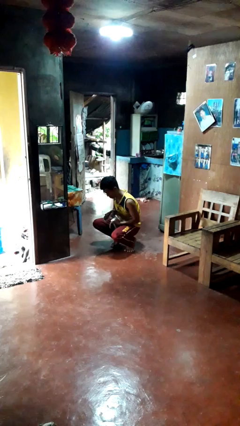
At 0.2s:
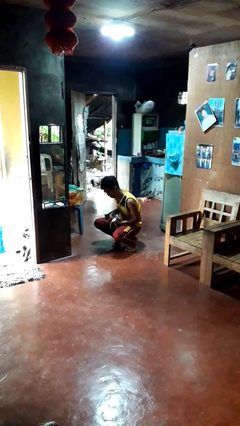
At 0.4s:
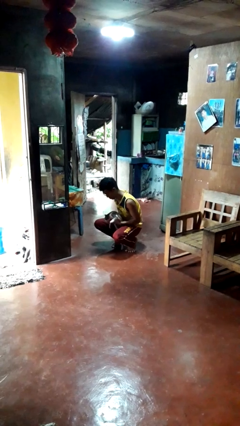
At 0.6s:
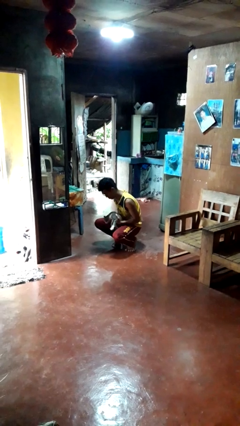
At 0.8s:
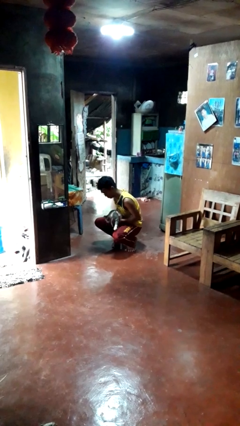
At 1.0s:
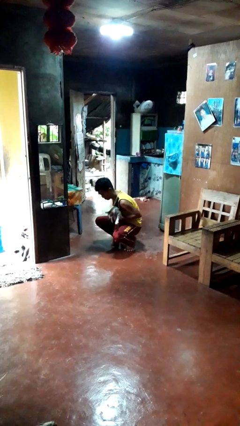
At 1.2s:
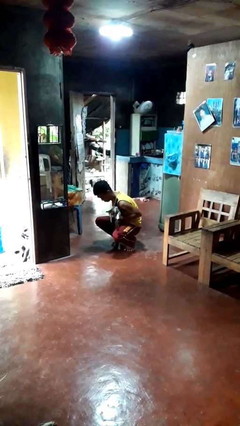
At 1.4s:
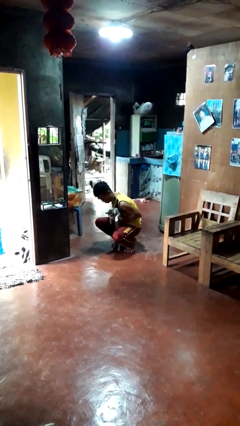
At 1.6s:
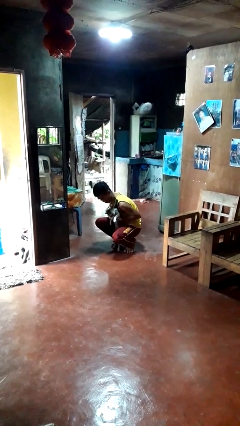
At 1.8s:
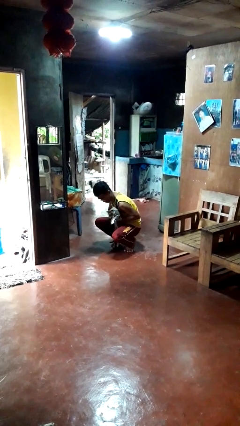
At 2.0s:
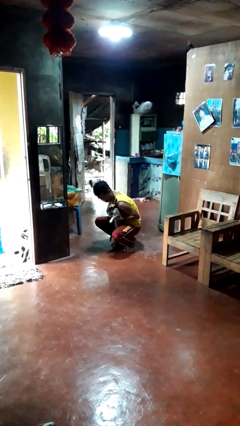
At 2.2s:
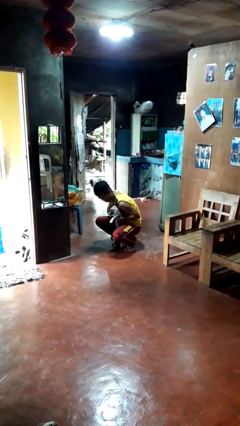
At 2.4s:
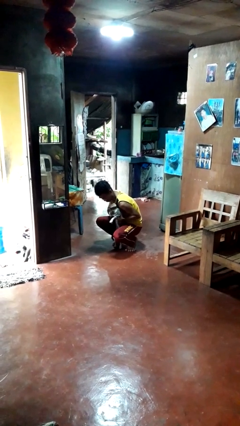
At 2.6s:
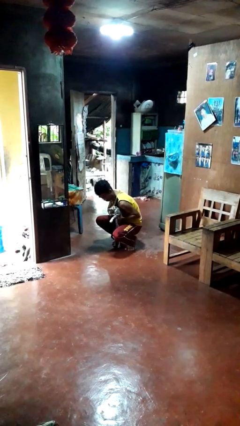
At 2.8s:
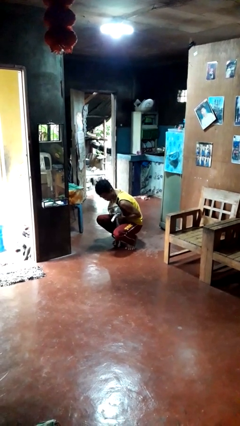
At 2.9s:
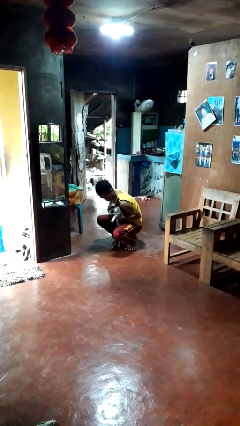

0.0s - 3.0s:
person hugs cat

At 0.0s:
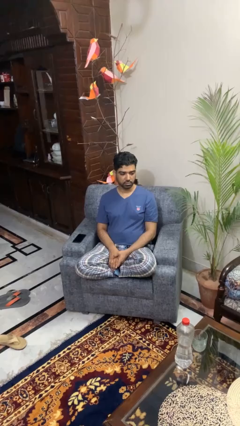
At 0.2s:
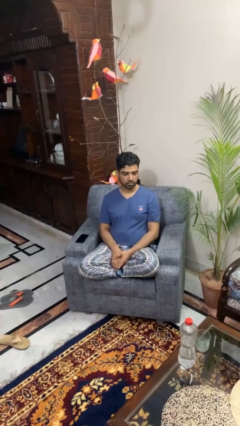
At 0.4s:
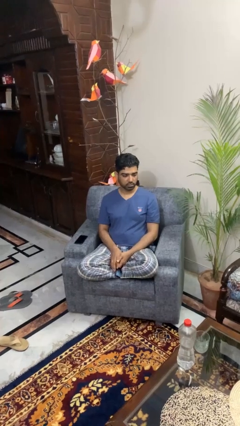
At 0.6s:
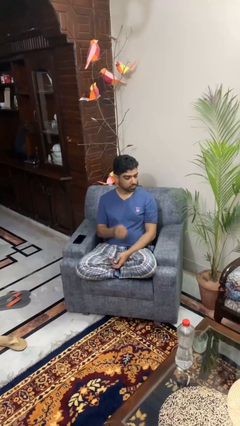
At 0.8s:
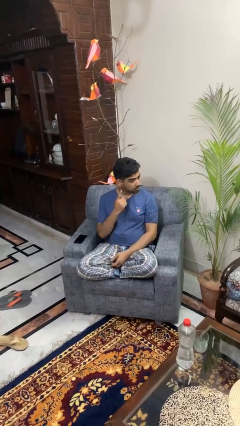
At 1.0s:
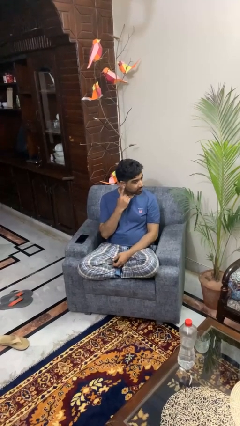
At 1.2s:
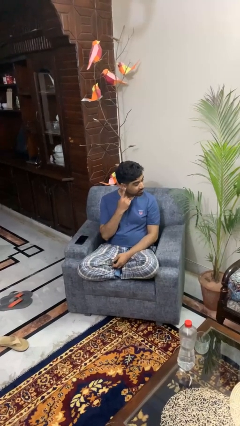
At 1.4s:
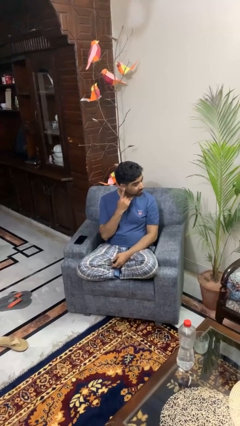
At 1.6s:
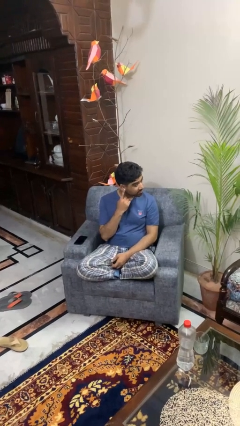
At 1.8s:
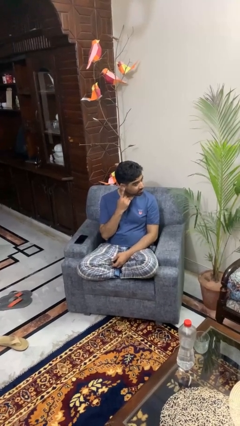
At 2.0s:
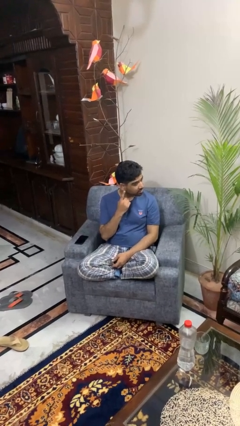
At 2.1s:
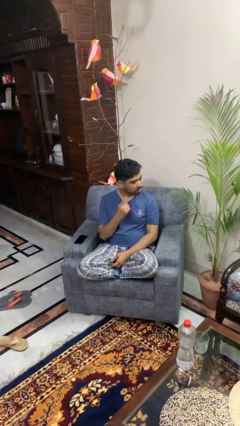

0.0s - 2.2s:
person gestures listen closely

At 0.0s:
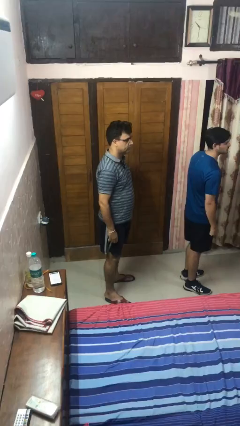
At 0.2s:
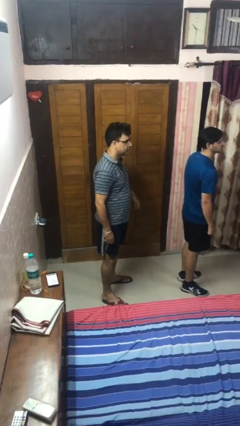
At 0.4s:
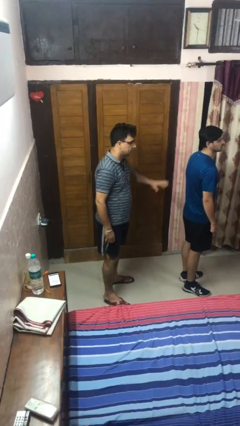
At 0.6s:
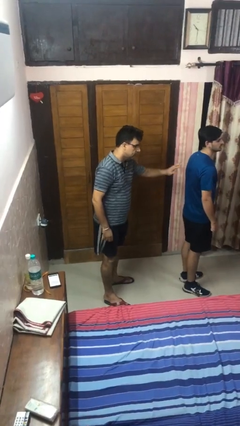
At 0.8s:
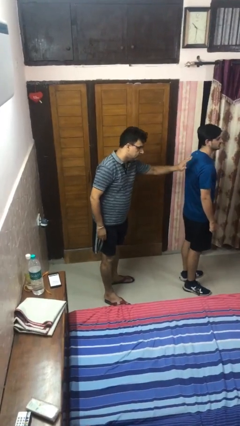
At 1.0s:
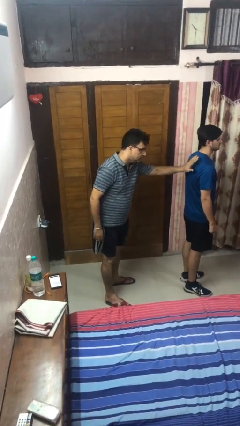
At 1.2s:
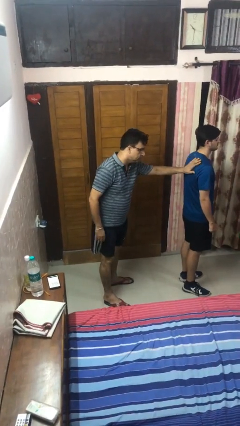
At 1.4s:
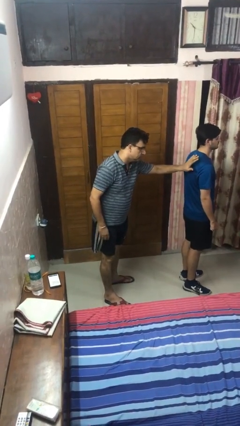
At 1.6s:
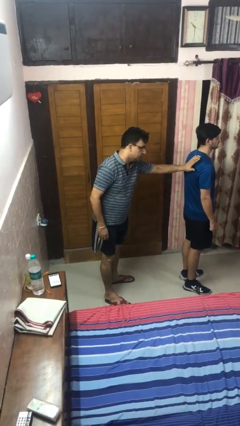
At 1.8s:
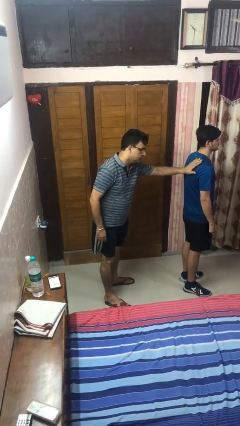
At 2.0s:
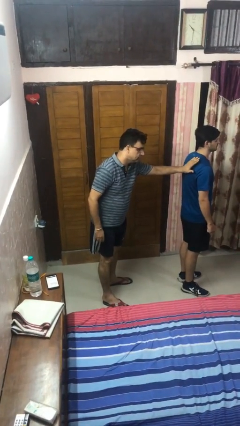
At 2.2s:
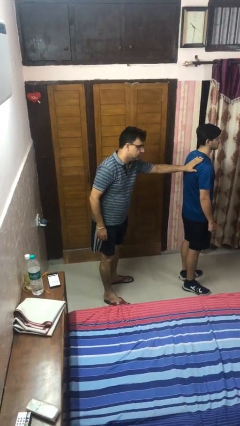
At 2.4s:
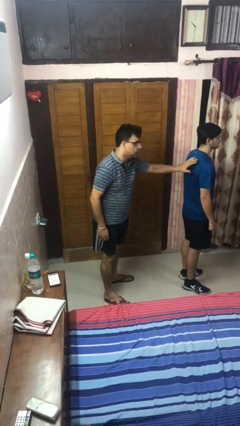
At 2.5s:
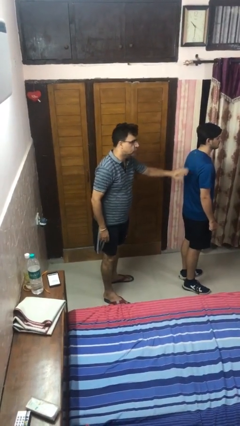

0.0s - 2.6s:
person touches back of person

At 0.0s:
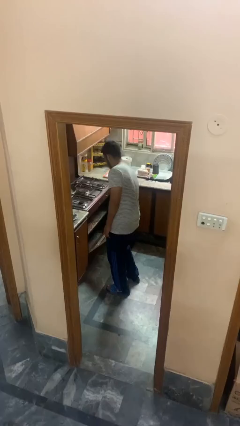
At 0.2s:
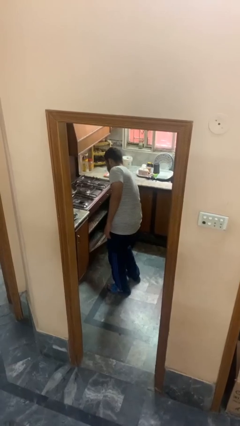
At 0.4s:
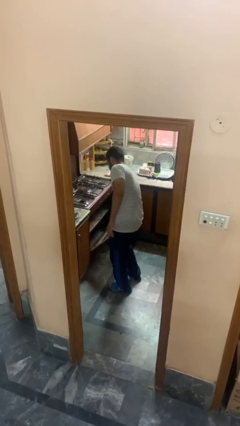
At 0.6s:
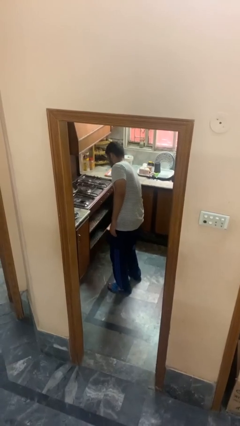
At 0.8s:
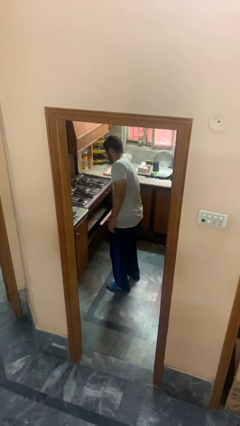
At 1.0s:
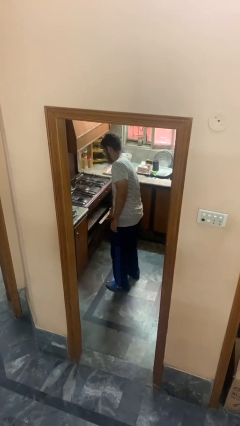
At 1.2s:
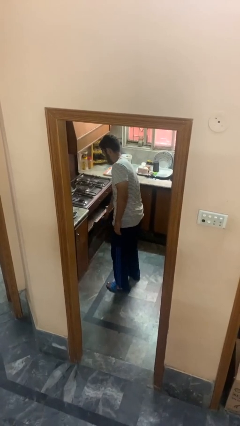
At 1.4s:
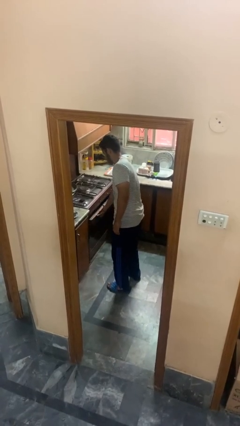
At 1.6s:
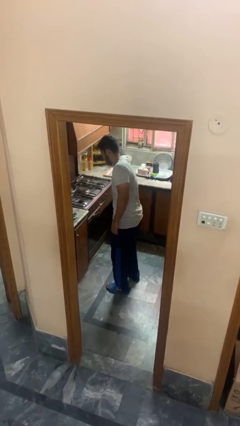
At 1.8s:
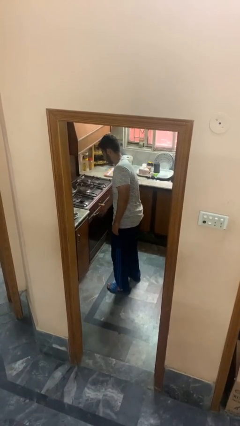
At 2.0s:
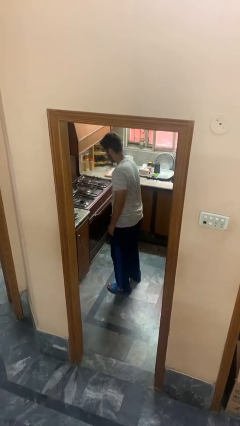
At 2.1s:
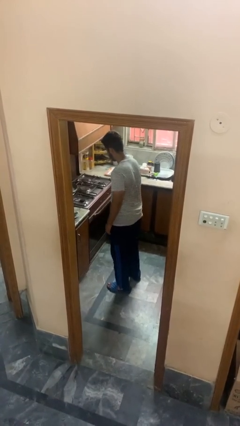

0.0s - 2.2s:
person closes oven door

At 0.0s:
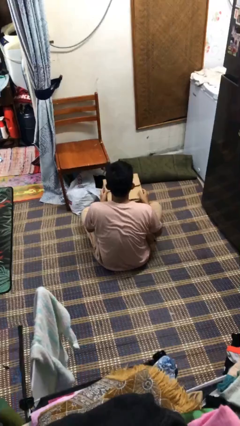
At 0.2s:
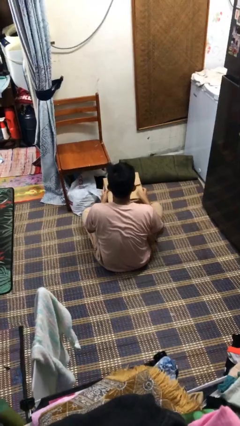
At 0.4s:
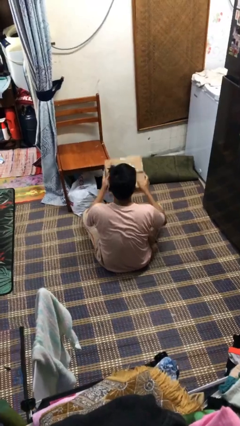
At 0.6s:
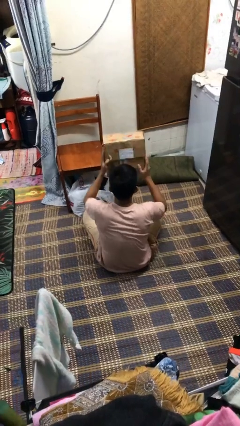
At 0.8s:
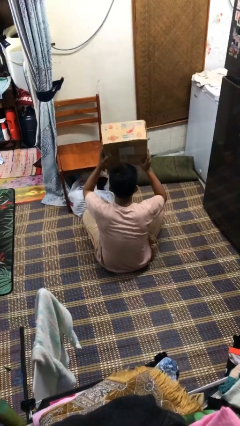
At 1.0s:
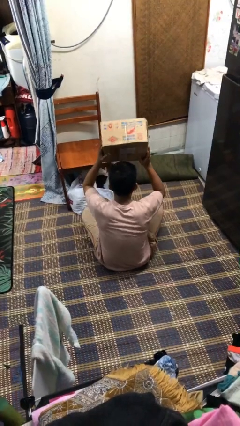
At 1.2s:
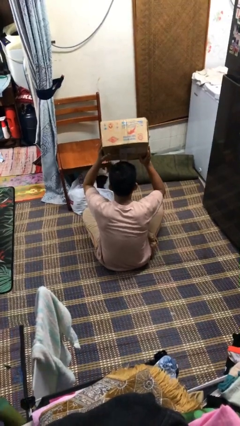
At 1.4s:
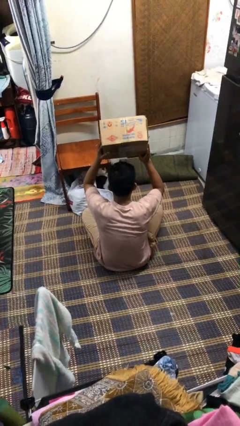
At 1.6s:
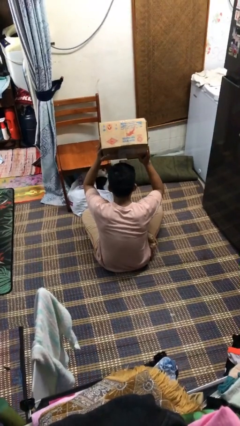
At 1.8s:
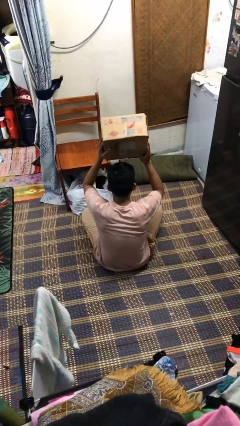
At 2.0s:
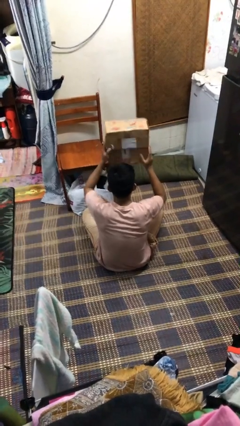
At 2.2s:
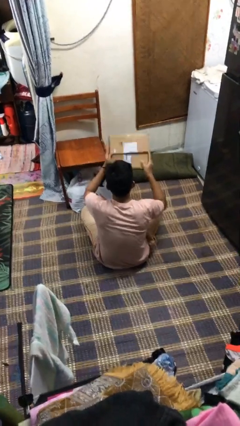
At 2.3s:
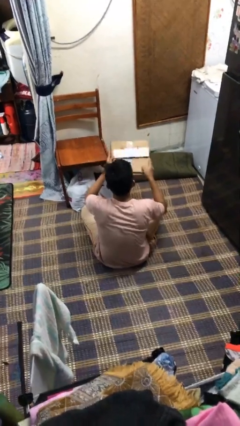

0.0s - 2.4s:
person holds object above head

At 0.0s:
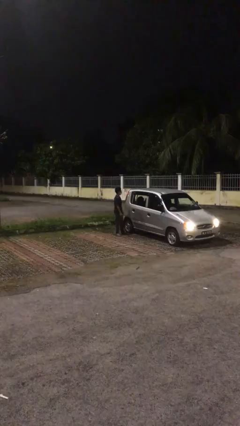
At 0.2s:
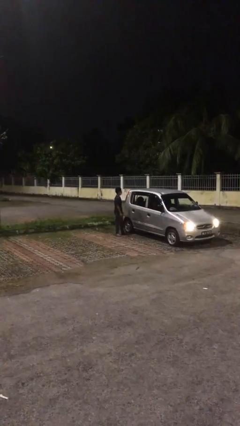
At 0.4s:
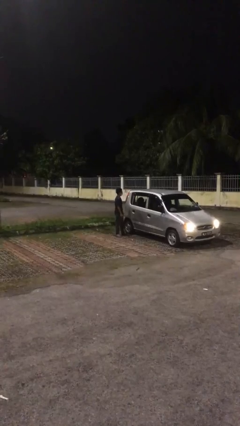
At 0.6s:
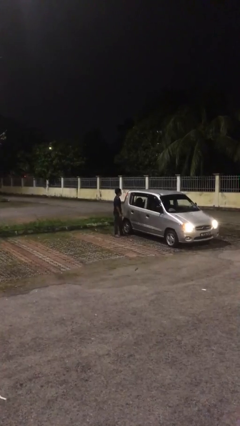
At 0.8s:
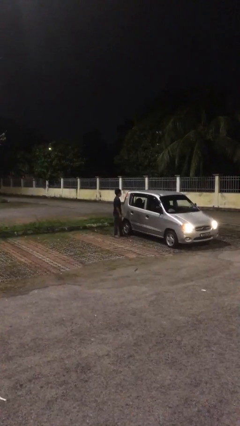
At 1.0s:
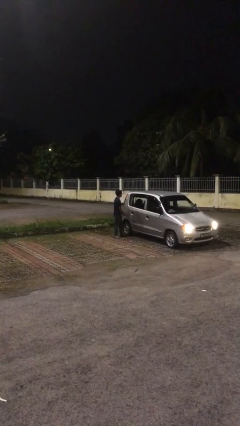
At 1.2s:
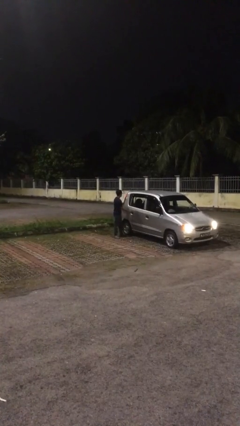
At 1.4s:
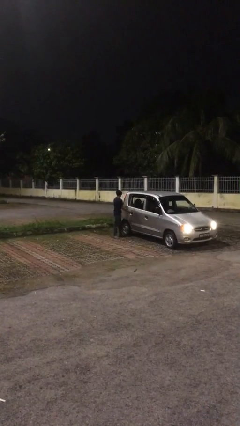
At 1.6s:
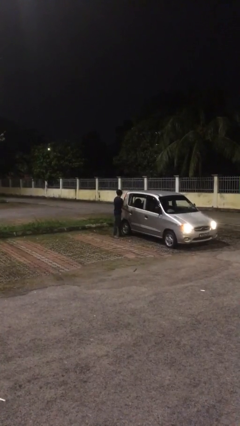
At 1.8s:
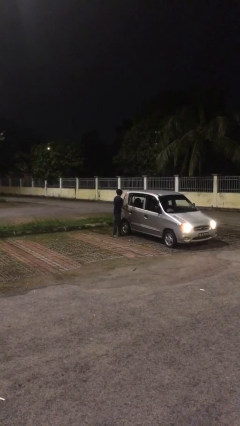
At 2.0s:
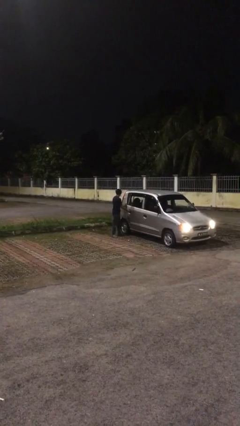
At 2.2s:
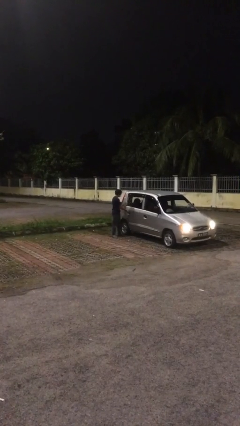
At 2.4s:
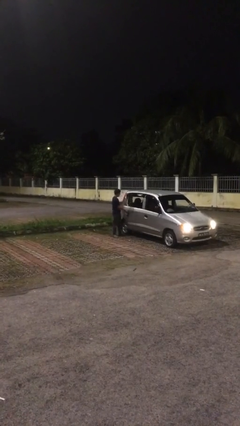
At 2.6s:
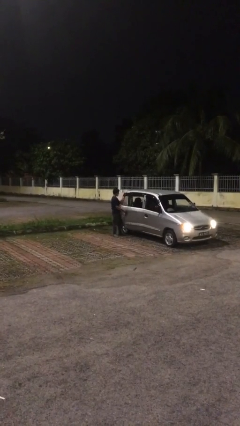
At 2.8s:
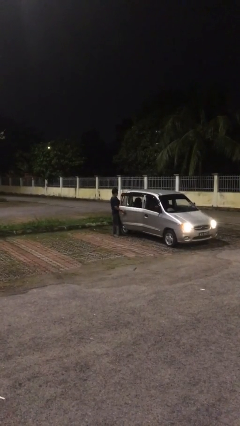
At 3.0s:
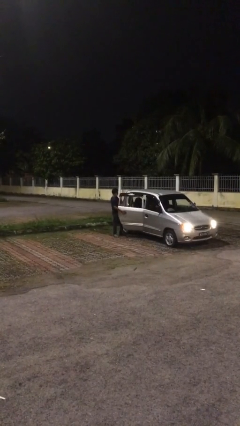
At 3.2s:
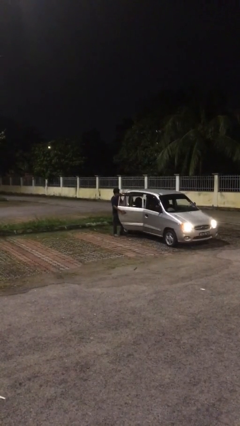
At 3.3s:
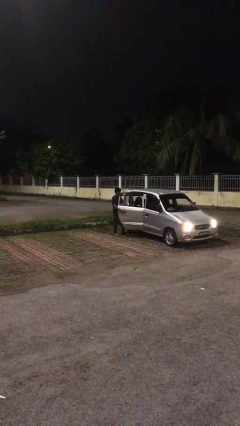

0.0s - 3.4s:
person opens car door

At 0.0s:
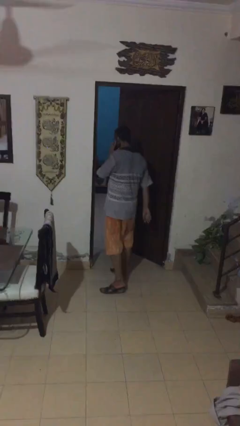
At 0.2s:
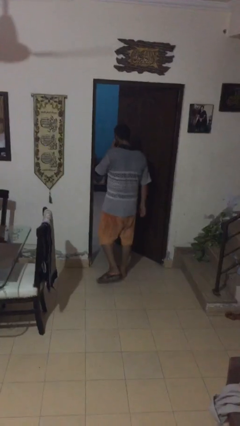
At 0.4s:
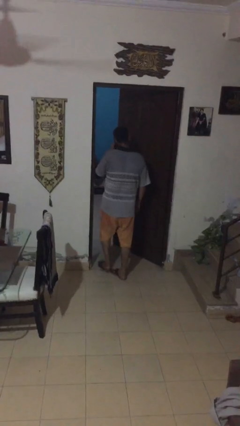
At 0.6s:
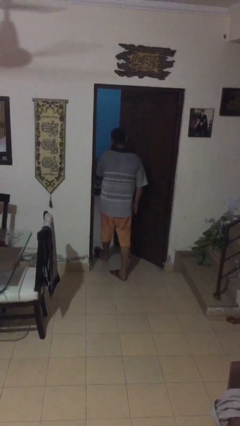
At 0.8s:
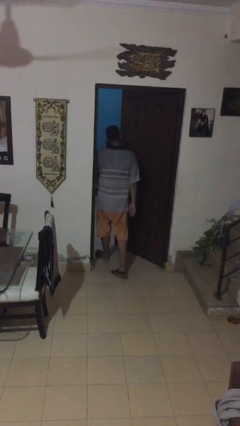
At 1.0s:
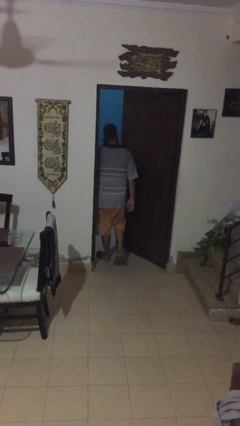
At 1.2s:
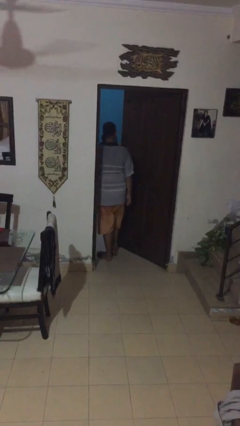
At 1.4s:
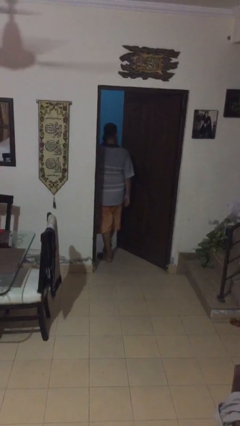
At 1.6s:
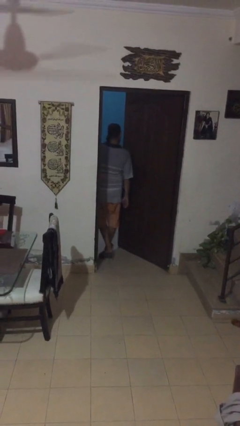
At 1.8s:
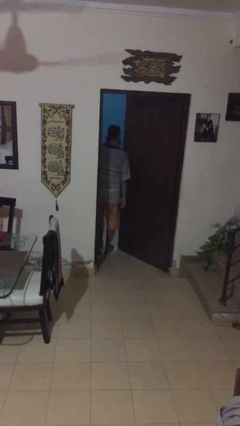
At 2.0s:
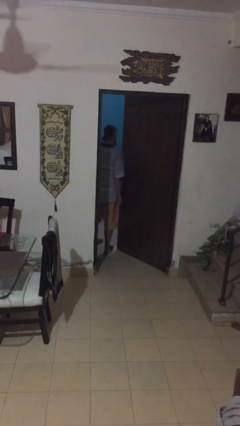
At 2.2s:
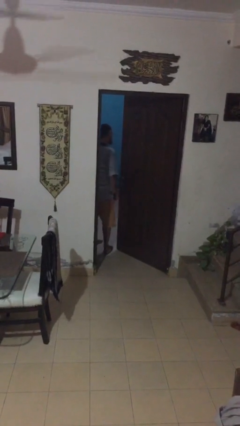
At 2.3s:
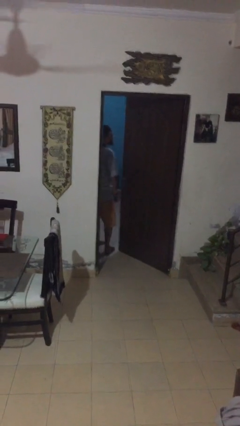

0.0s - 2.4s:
person exits scene through structure
